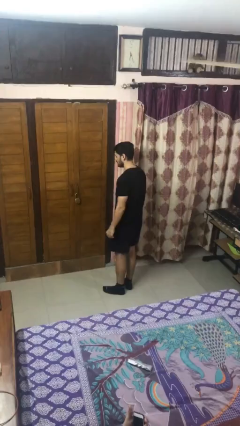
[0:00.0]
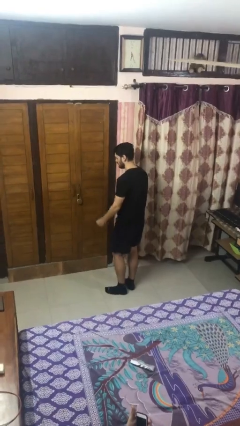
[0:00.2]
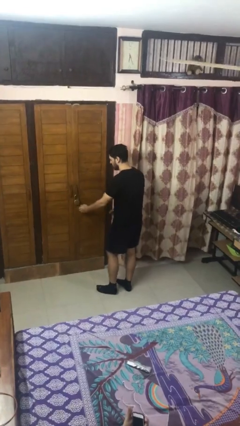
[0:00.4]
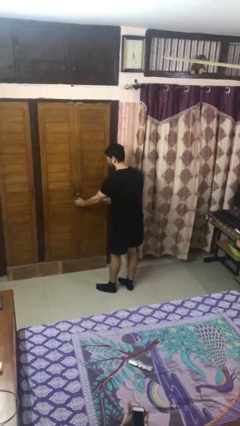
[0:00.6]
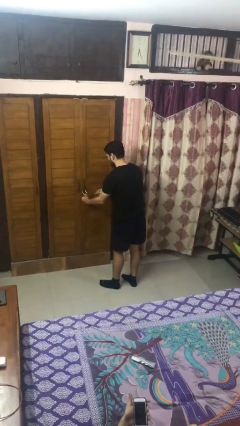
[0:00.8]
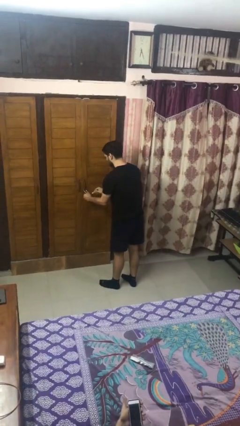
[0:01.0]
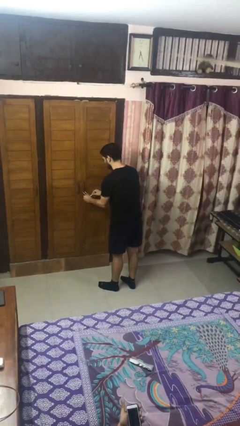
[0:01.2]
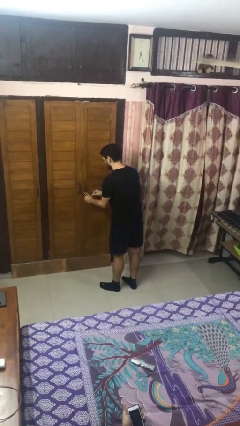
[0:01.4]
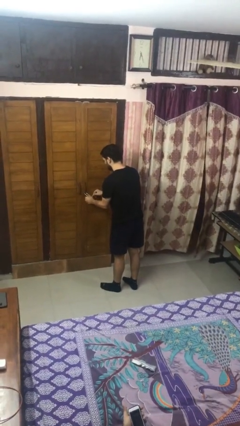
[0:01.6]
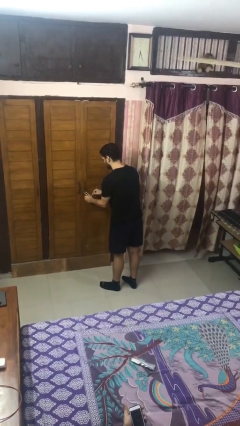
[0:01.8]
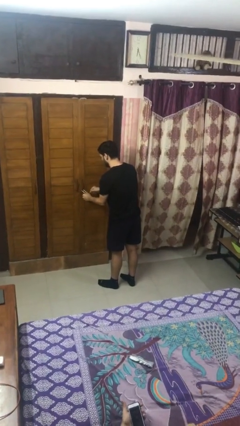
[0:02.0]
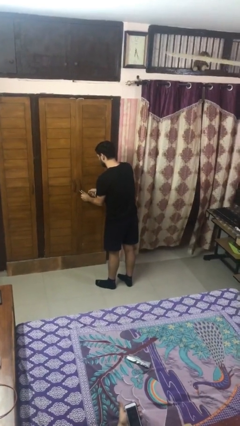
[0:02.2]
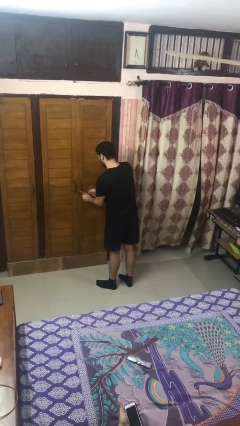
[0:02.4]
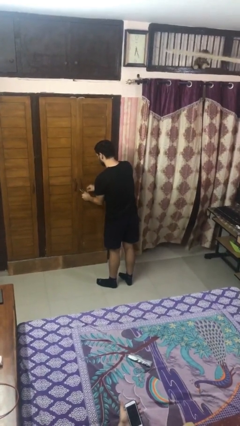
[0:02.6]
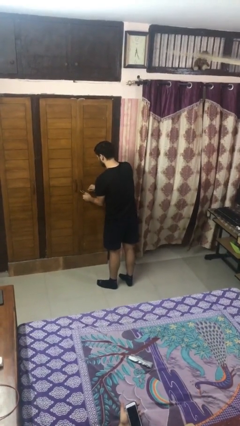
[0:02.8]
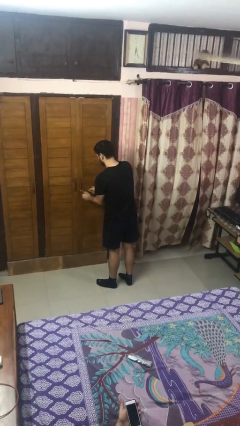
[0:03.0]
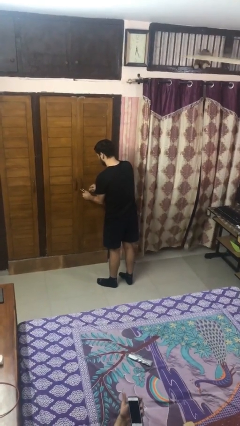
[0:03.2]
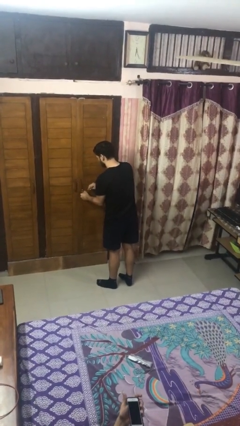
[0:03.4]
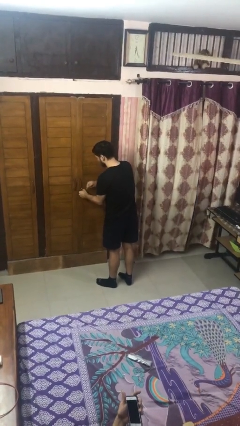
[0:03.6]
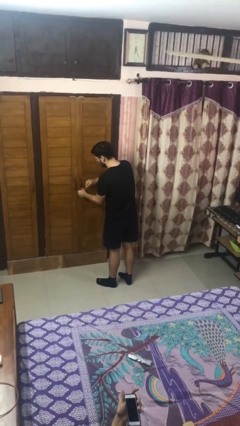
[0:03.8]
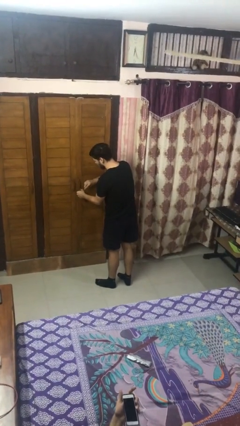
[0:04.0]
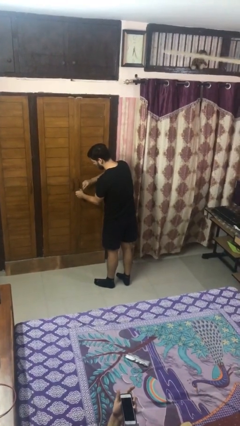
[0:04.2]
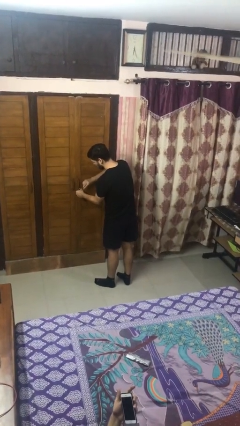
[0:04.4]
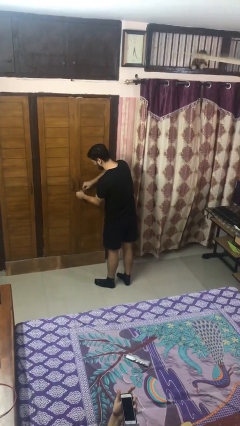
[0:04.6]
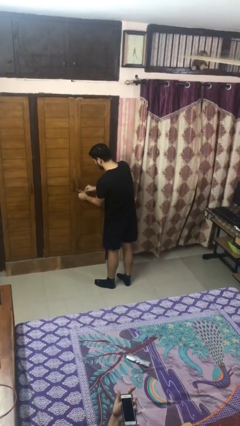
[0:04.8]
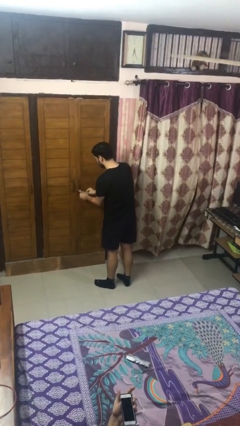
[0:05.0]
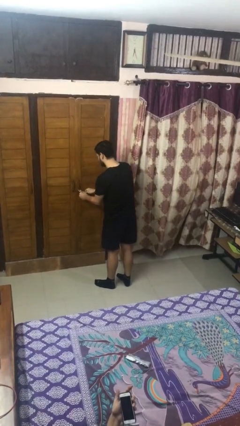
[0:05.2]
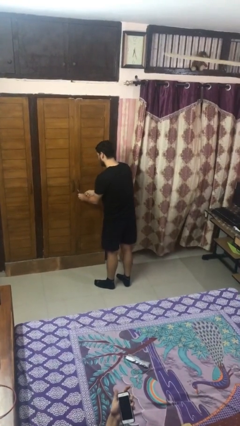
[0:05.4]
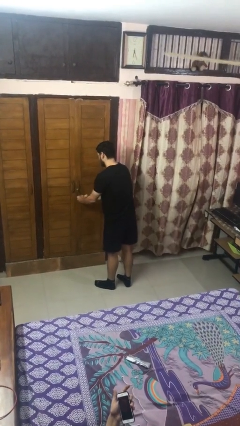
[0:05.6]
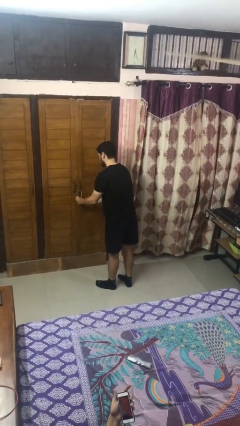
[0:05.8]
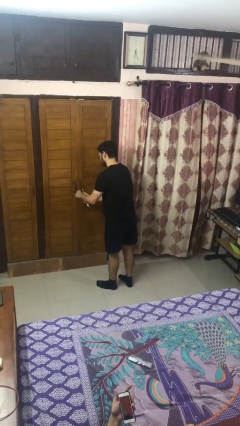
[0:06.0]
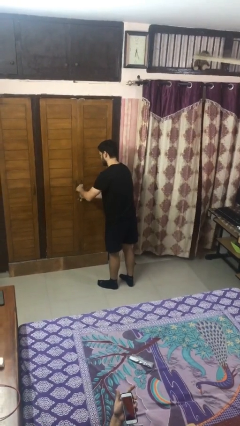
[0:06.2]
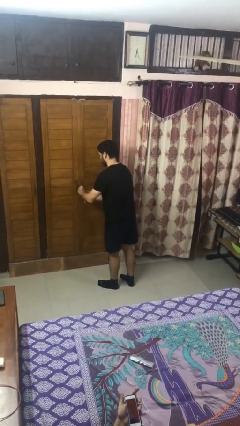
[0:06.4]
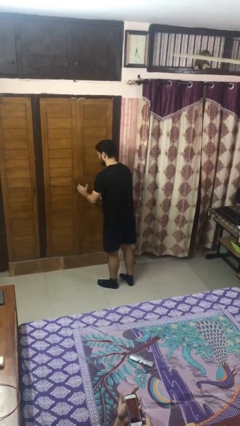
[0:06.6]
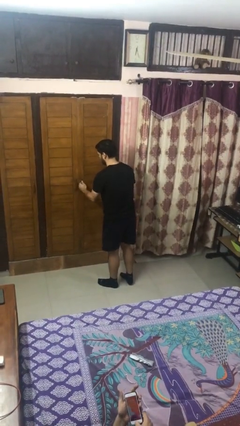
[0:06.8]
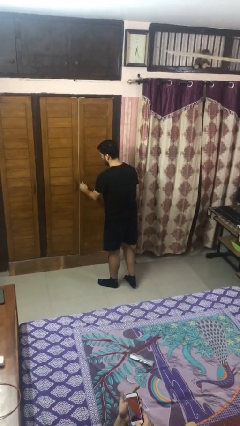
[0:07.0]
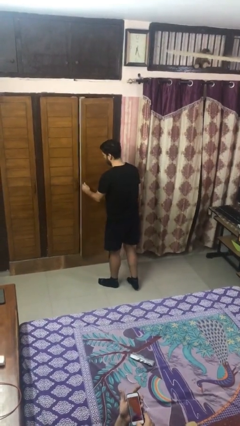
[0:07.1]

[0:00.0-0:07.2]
person unlocks door with keys

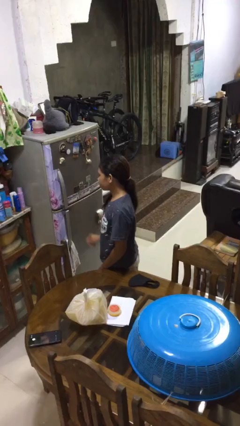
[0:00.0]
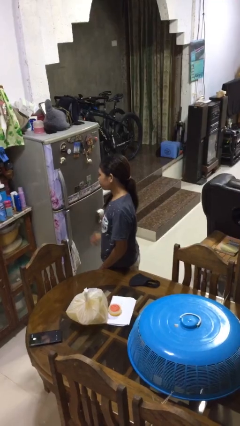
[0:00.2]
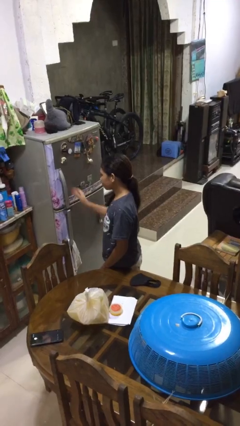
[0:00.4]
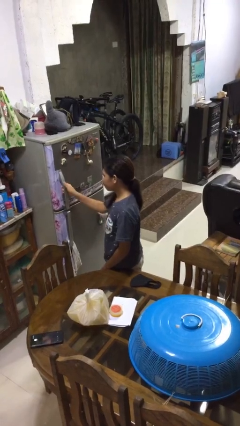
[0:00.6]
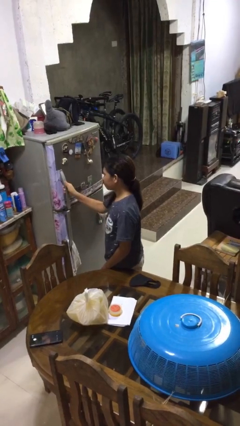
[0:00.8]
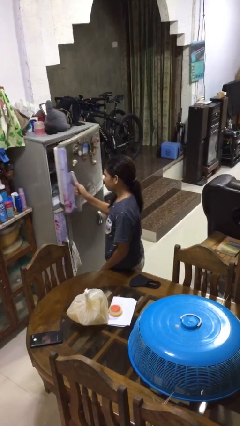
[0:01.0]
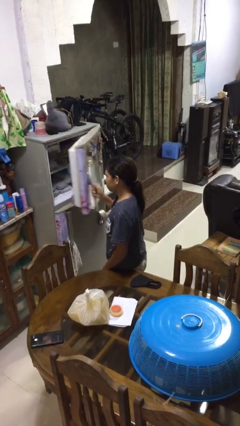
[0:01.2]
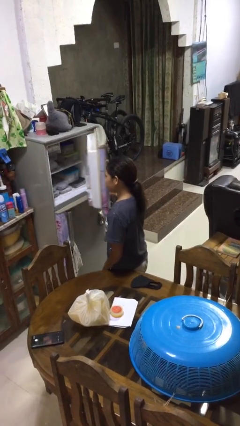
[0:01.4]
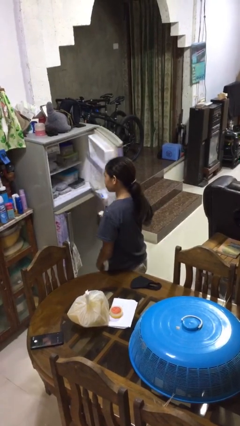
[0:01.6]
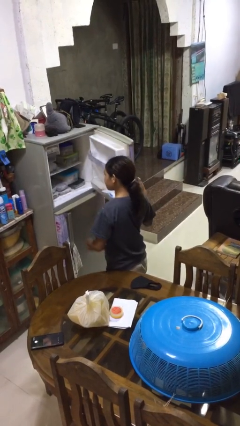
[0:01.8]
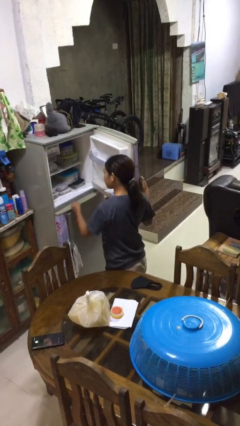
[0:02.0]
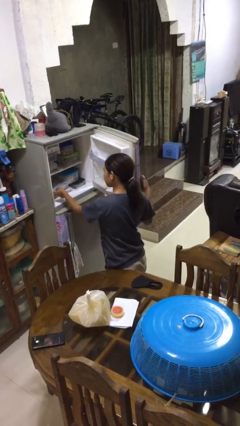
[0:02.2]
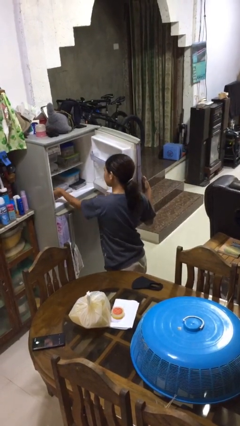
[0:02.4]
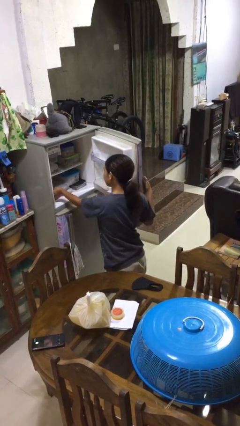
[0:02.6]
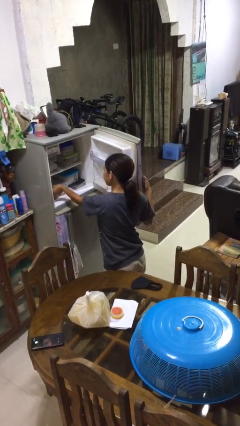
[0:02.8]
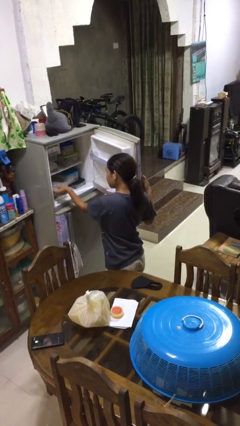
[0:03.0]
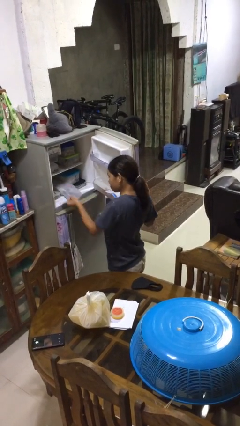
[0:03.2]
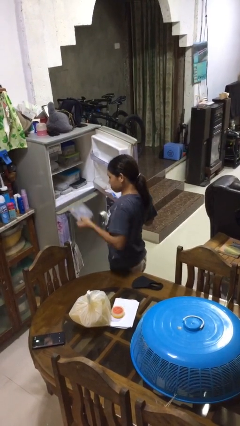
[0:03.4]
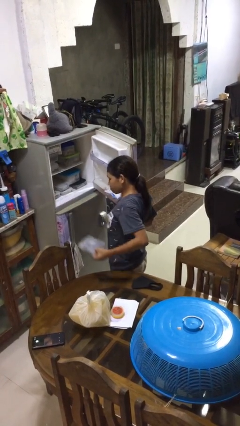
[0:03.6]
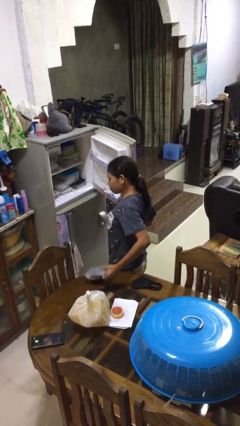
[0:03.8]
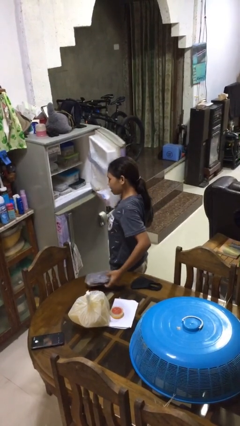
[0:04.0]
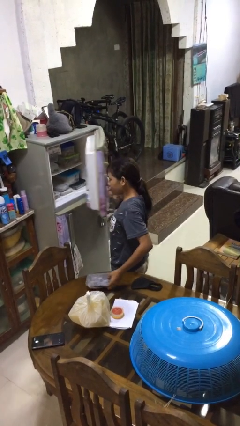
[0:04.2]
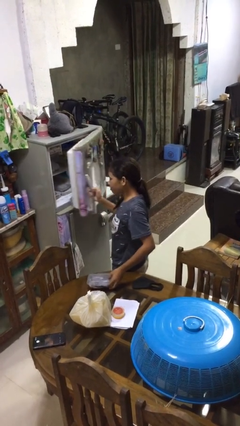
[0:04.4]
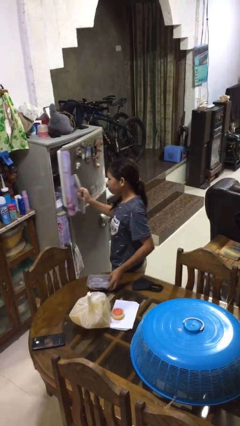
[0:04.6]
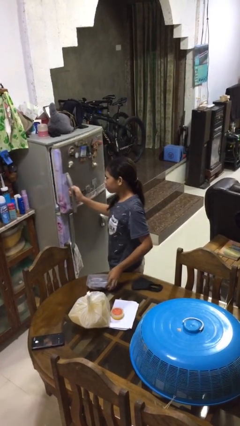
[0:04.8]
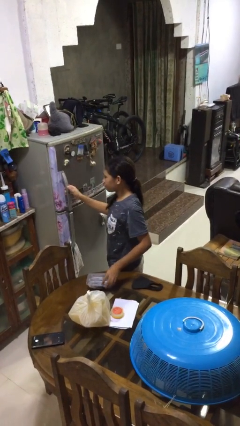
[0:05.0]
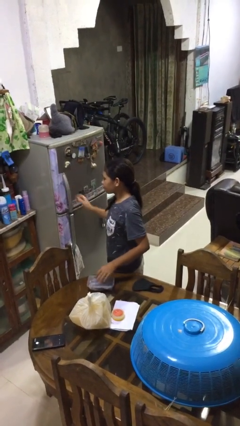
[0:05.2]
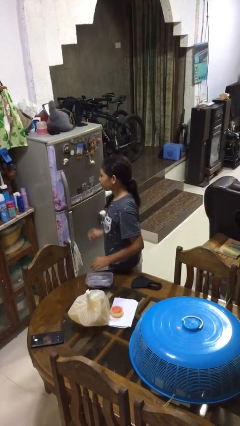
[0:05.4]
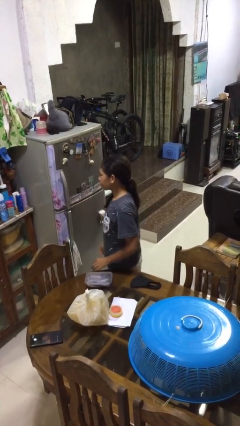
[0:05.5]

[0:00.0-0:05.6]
person takes object from refrigerator

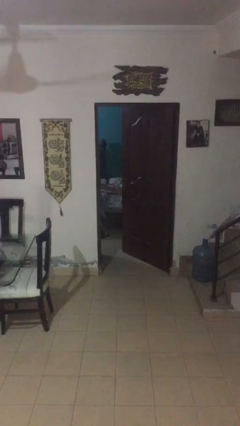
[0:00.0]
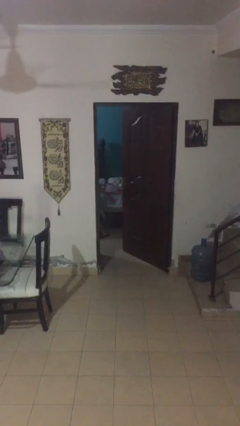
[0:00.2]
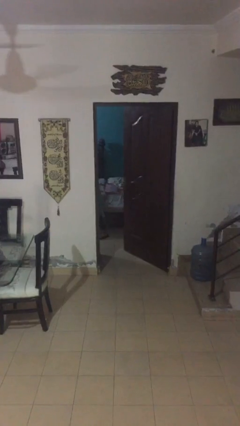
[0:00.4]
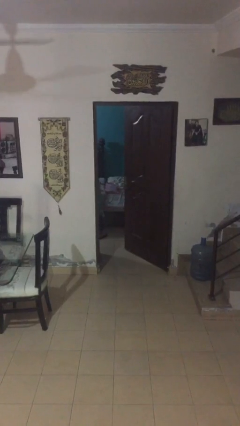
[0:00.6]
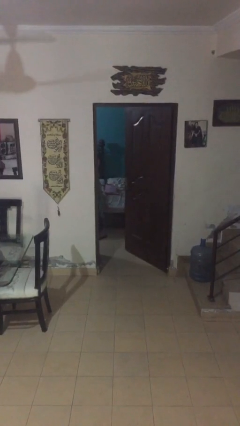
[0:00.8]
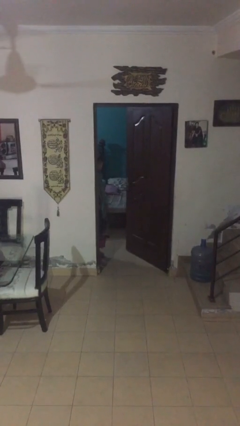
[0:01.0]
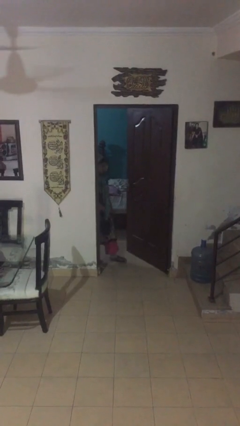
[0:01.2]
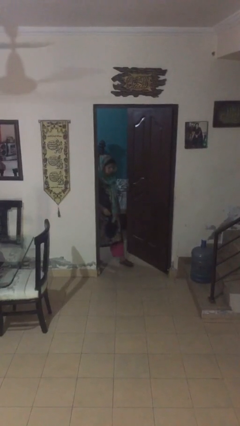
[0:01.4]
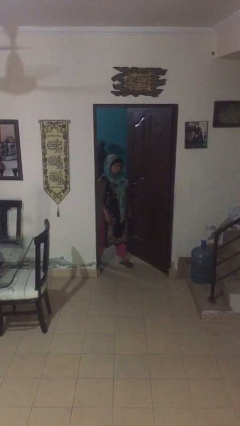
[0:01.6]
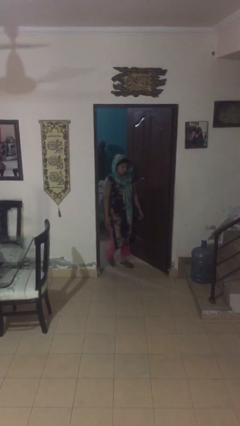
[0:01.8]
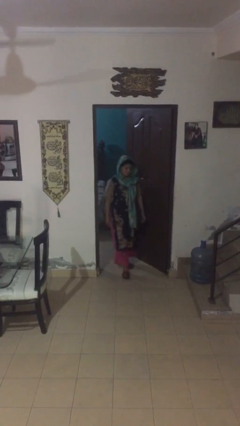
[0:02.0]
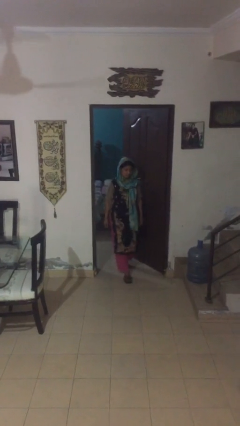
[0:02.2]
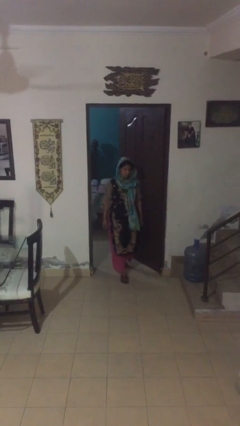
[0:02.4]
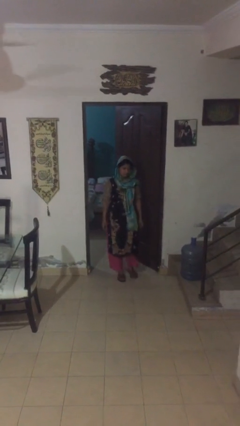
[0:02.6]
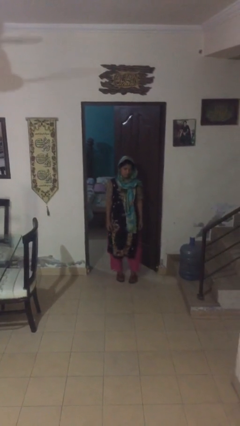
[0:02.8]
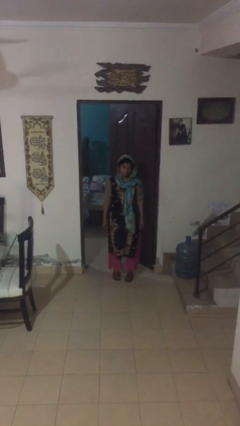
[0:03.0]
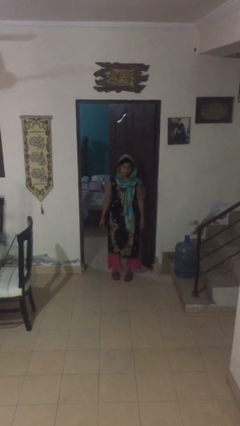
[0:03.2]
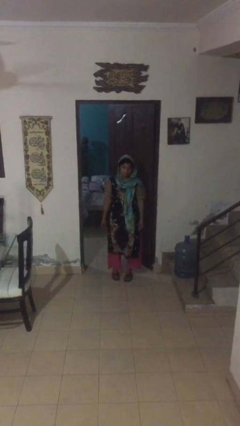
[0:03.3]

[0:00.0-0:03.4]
person enters scene through structure

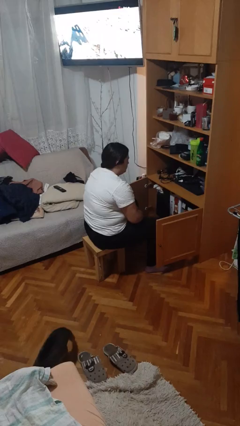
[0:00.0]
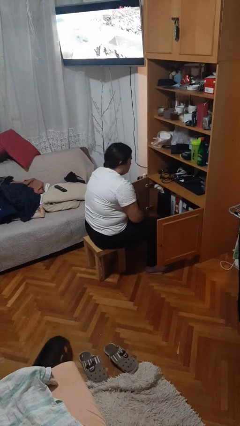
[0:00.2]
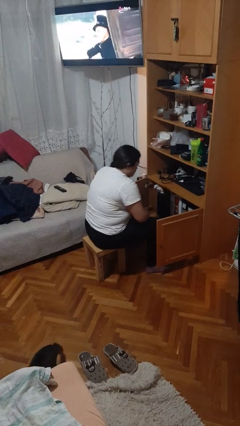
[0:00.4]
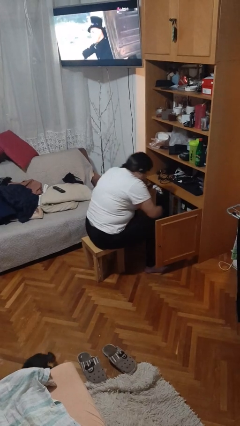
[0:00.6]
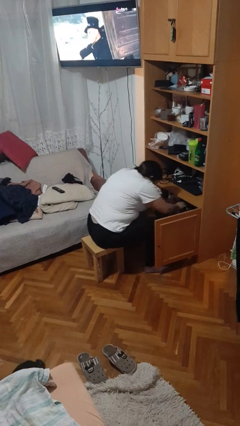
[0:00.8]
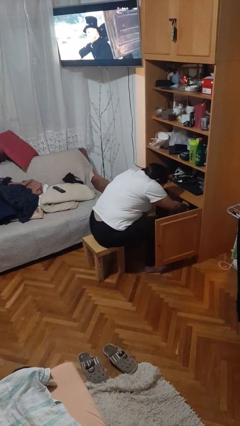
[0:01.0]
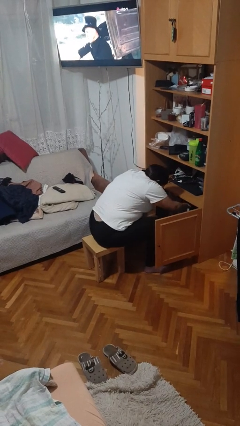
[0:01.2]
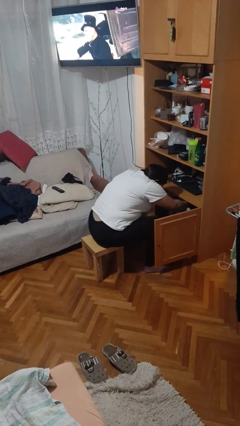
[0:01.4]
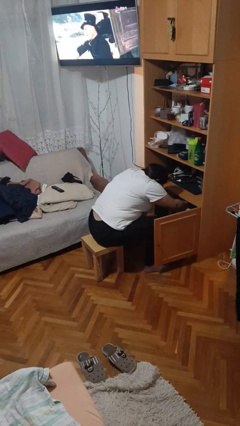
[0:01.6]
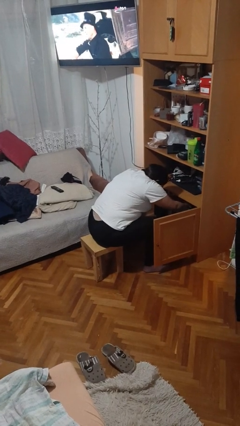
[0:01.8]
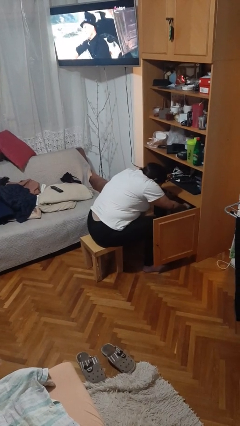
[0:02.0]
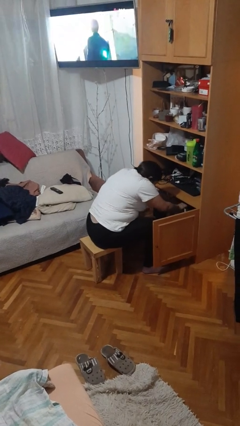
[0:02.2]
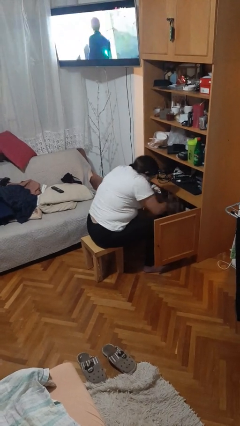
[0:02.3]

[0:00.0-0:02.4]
person searches in cabinet
